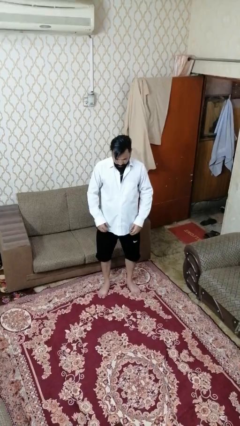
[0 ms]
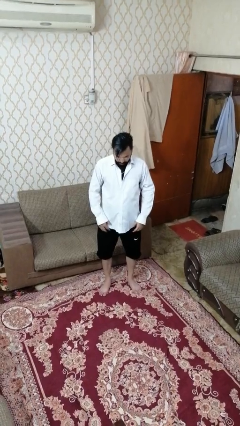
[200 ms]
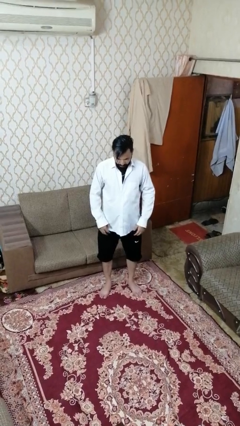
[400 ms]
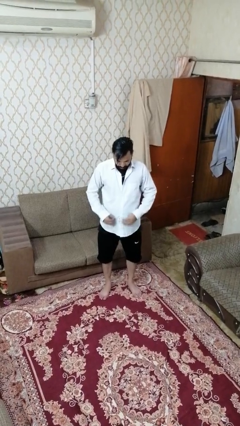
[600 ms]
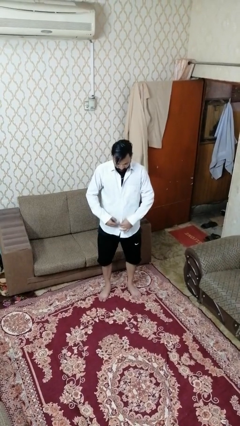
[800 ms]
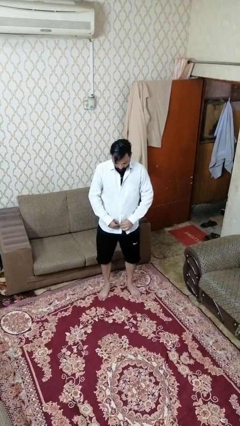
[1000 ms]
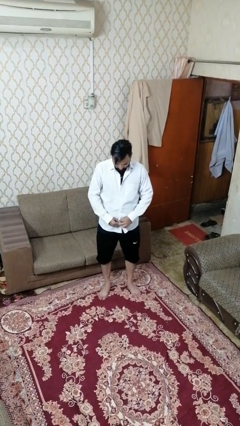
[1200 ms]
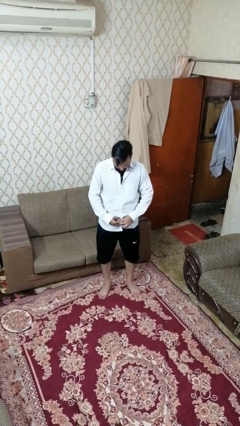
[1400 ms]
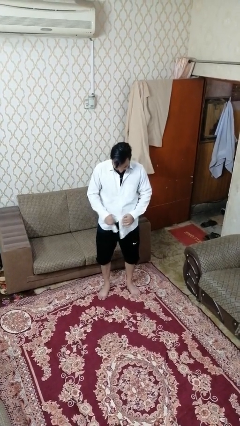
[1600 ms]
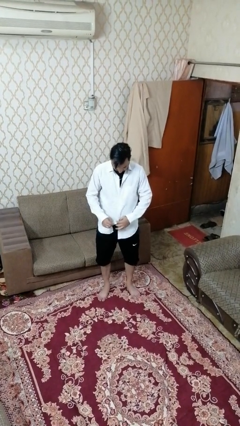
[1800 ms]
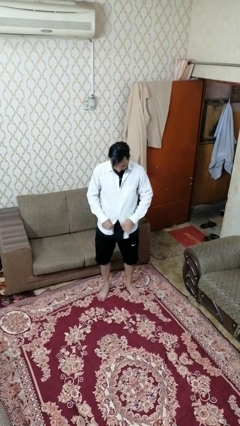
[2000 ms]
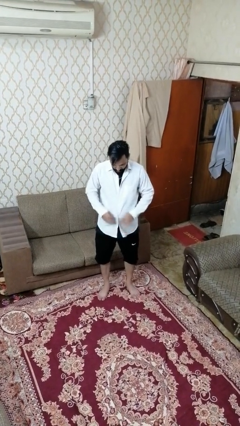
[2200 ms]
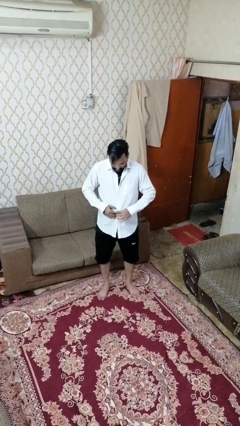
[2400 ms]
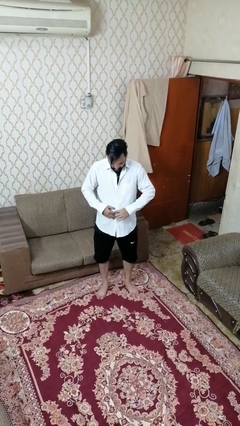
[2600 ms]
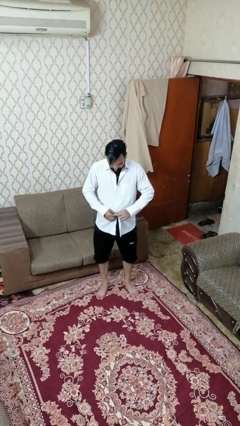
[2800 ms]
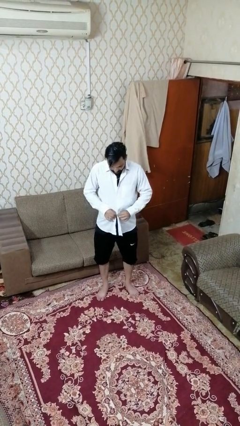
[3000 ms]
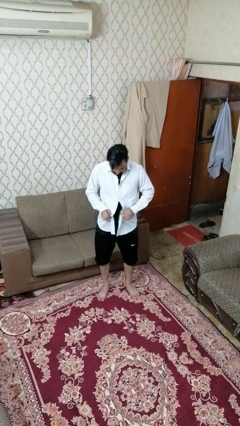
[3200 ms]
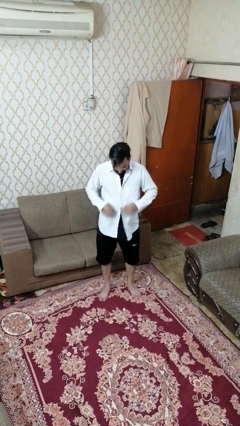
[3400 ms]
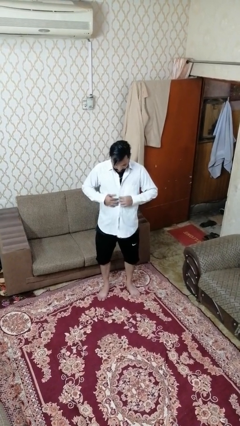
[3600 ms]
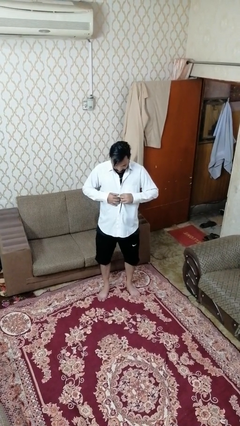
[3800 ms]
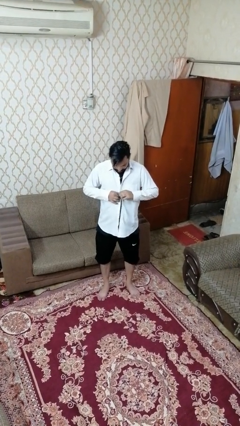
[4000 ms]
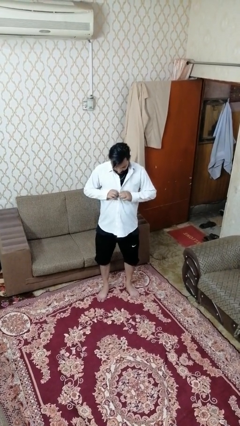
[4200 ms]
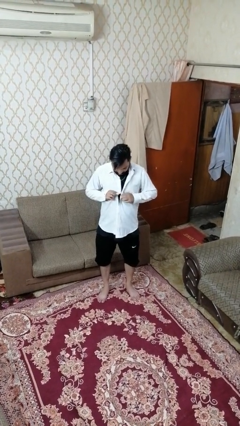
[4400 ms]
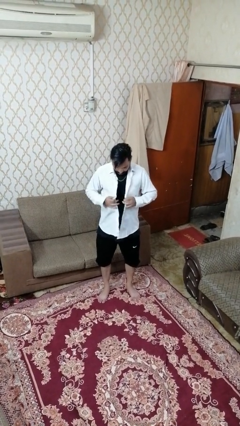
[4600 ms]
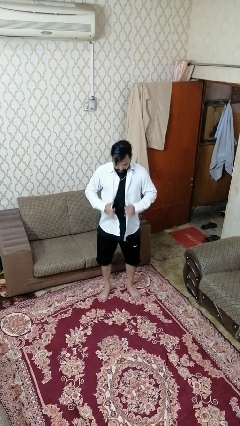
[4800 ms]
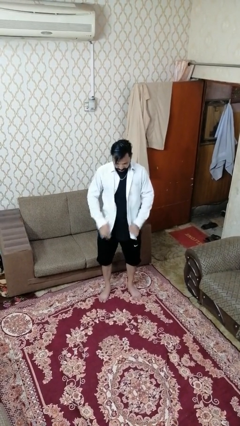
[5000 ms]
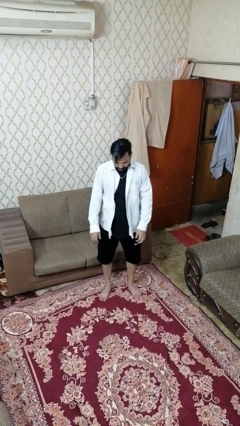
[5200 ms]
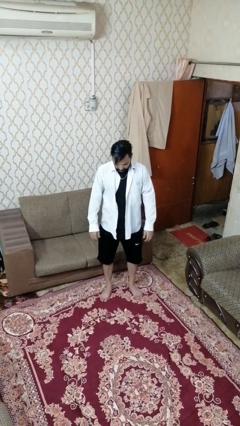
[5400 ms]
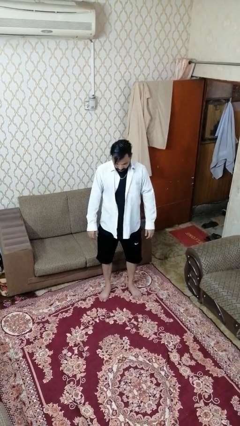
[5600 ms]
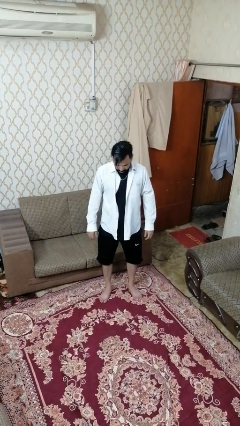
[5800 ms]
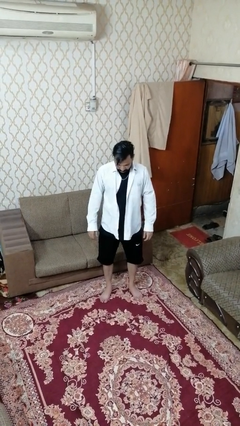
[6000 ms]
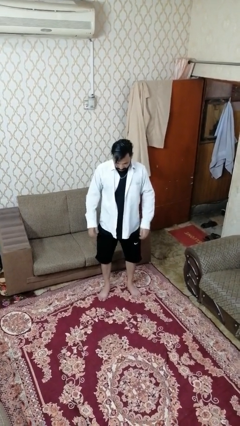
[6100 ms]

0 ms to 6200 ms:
person unbuttons shirt

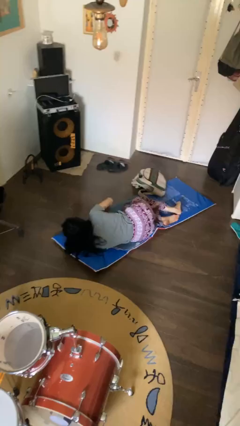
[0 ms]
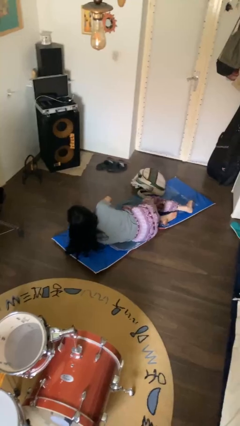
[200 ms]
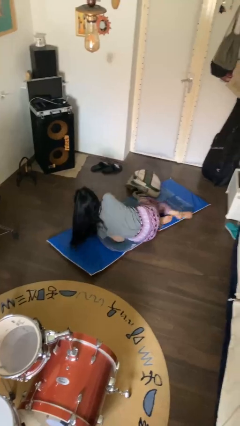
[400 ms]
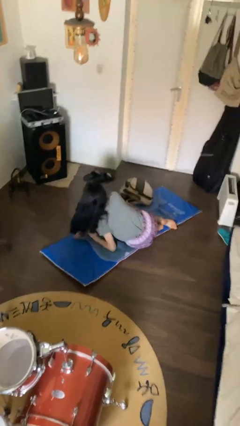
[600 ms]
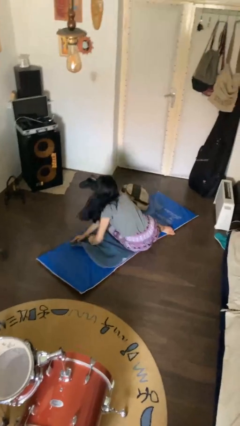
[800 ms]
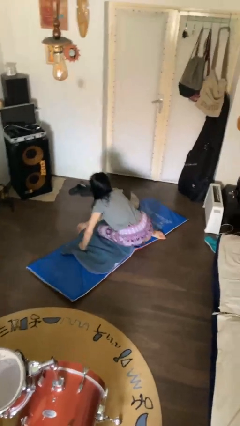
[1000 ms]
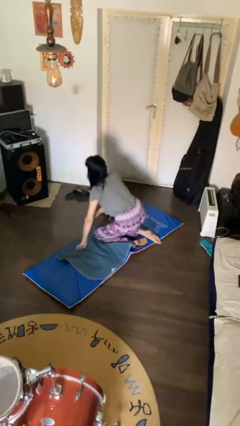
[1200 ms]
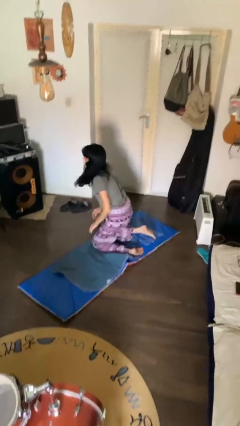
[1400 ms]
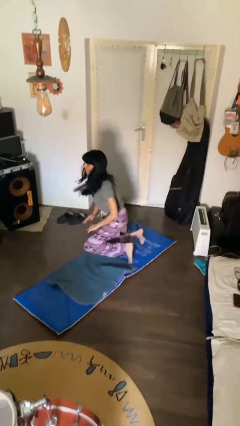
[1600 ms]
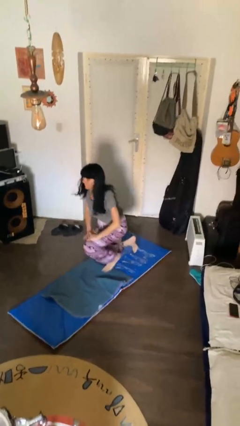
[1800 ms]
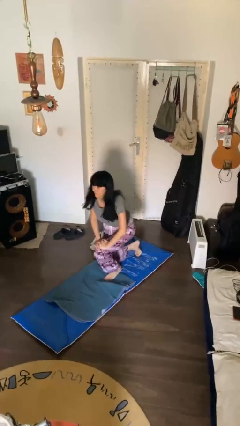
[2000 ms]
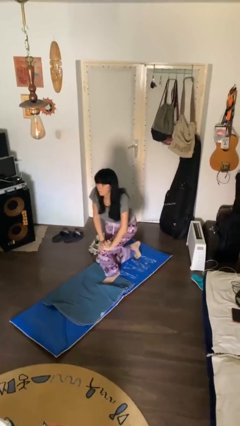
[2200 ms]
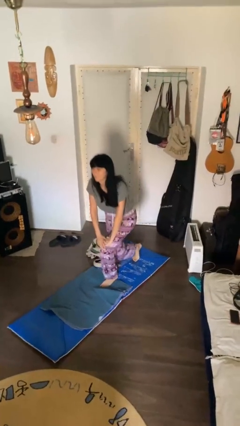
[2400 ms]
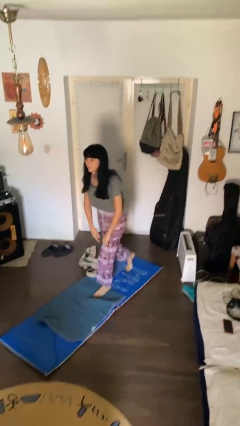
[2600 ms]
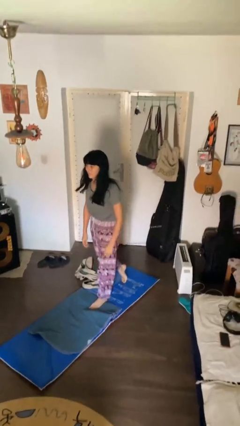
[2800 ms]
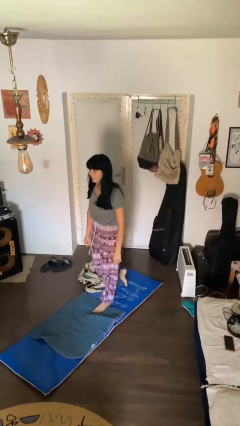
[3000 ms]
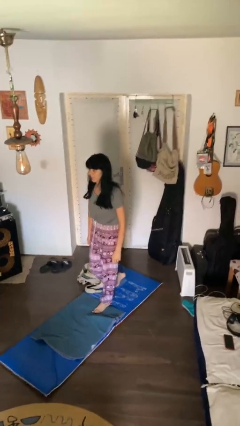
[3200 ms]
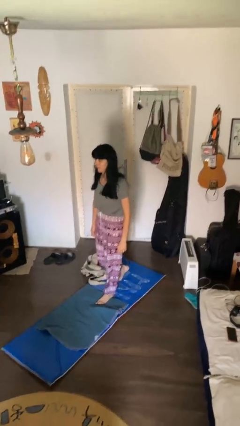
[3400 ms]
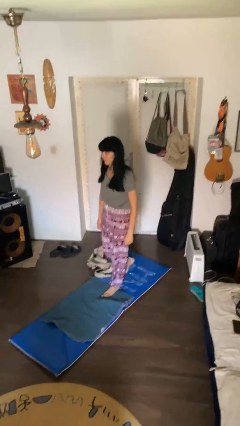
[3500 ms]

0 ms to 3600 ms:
person stands up from floor

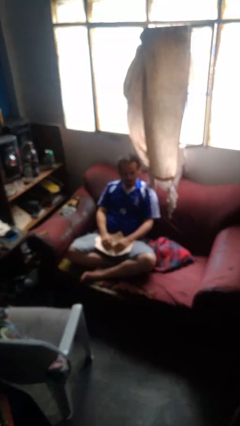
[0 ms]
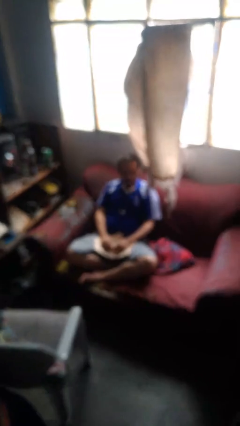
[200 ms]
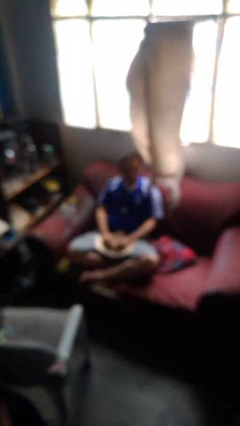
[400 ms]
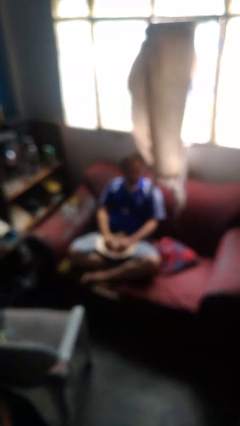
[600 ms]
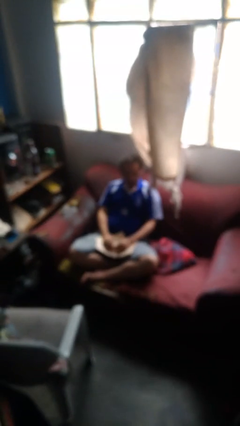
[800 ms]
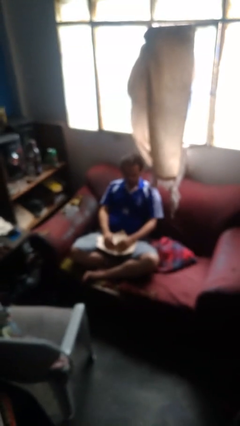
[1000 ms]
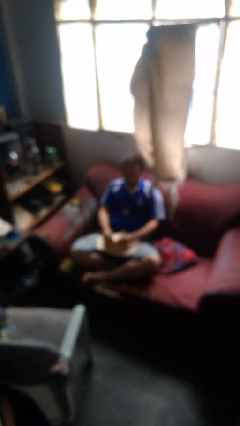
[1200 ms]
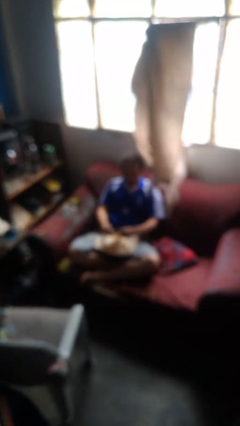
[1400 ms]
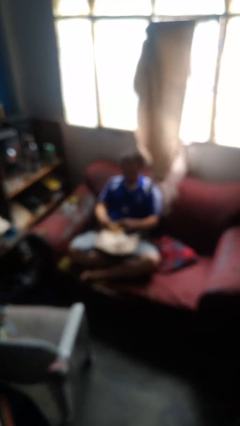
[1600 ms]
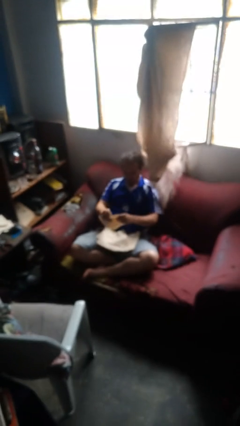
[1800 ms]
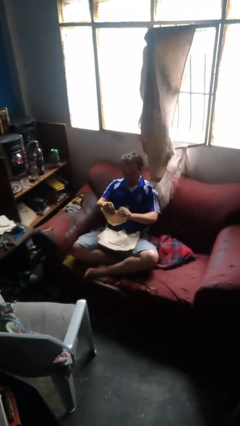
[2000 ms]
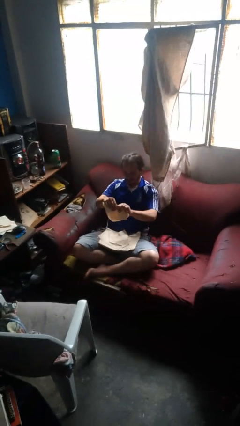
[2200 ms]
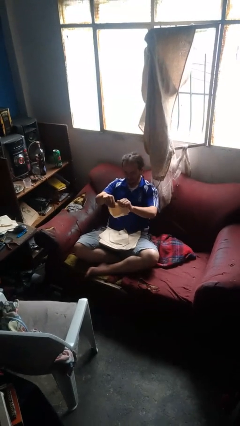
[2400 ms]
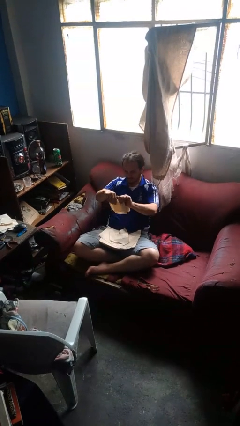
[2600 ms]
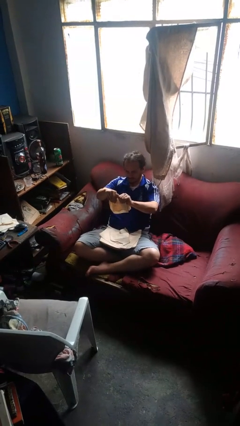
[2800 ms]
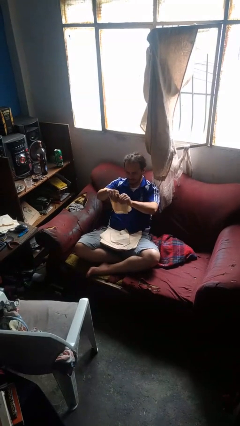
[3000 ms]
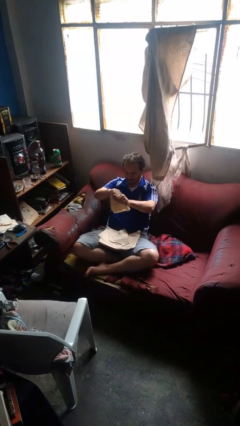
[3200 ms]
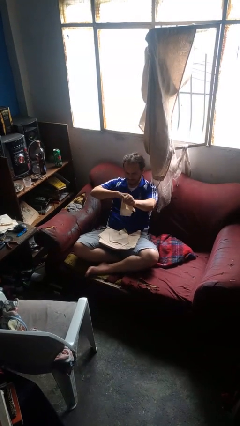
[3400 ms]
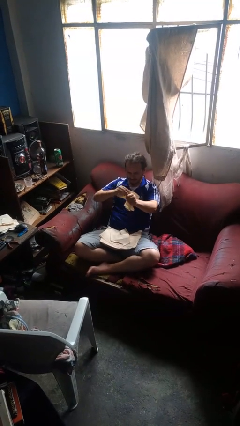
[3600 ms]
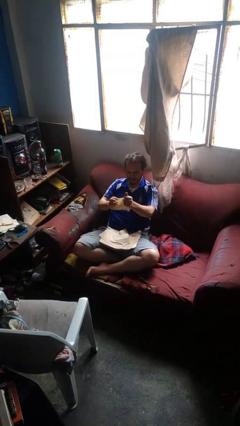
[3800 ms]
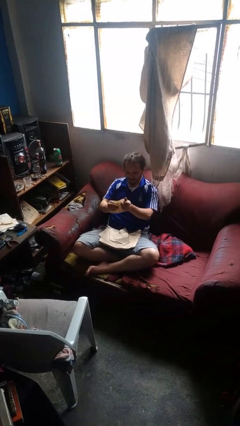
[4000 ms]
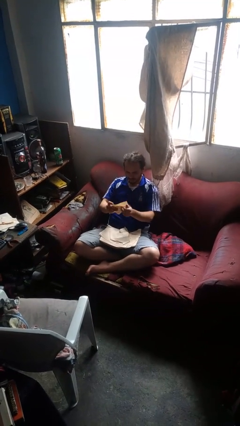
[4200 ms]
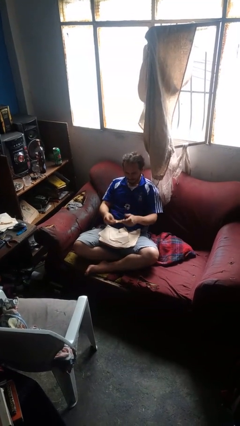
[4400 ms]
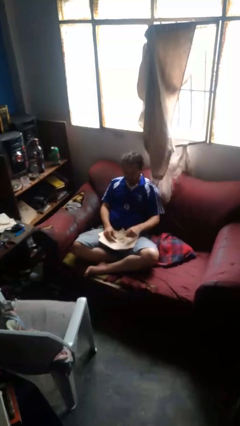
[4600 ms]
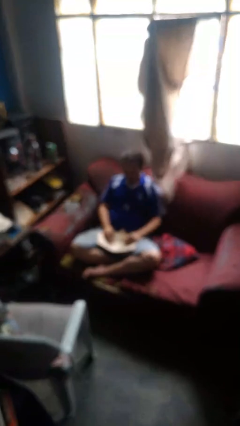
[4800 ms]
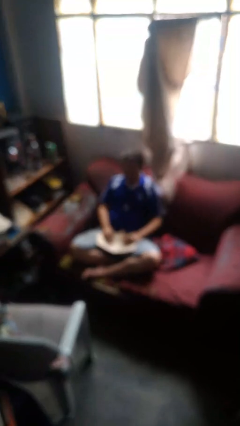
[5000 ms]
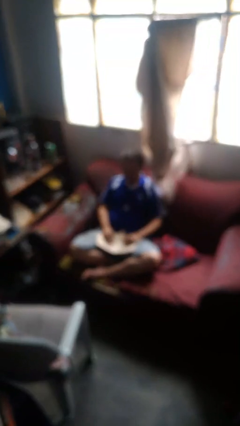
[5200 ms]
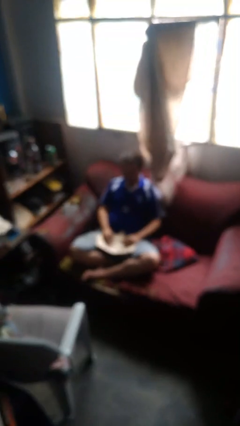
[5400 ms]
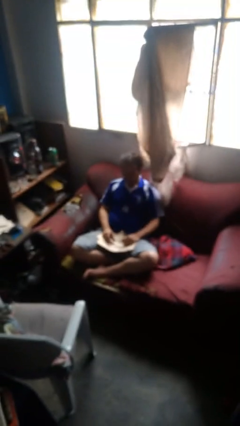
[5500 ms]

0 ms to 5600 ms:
person tears paper

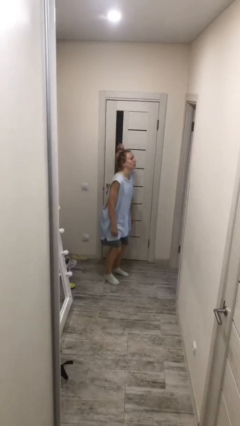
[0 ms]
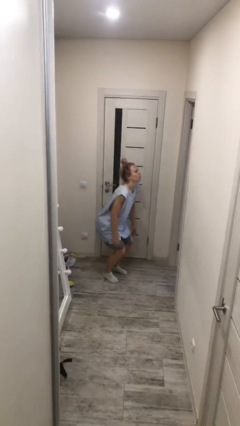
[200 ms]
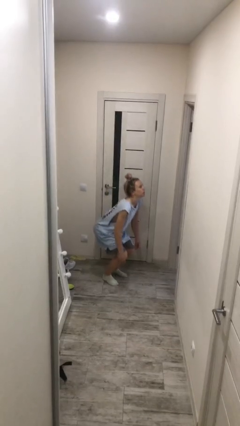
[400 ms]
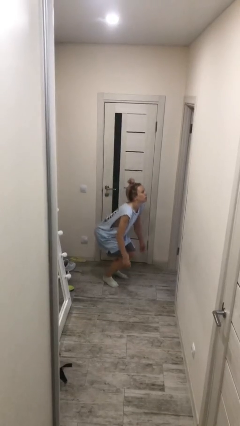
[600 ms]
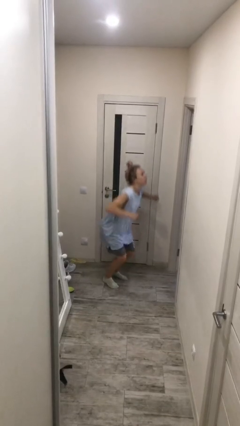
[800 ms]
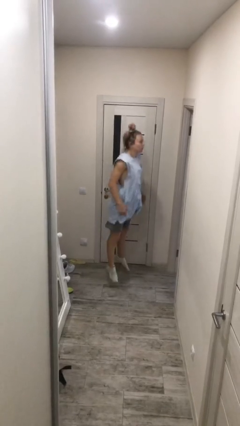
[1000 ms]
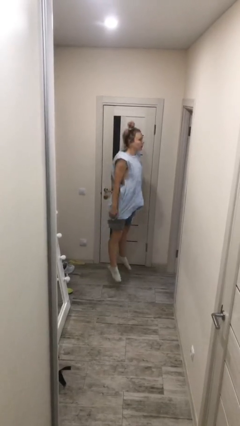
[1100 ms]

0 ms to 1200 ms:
person jumps

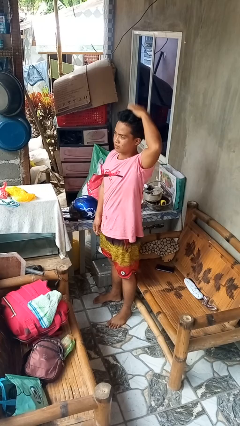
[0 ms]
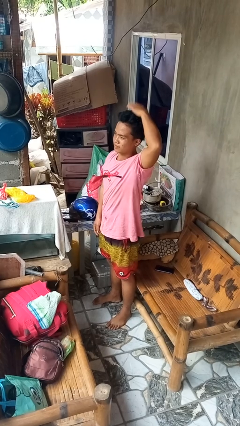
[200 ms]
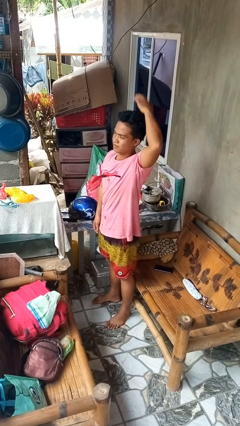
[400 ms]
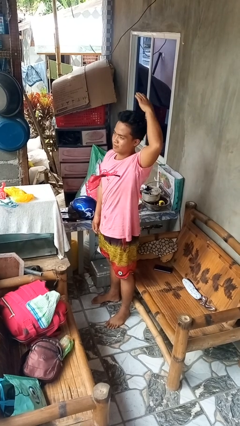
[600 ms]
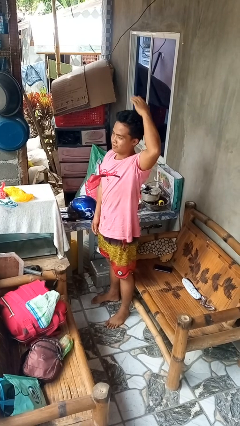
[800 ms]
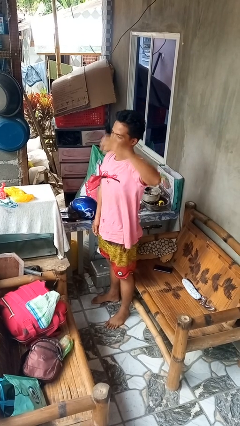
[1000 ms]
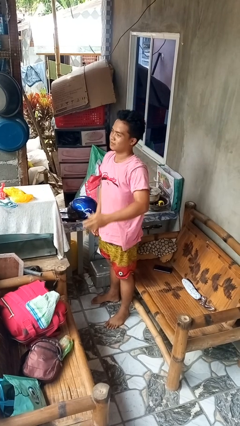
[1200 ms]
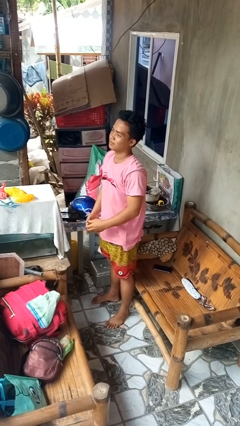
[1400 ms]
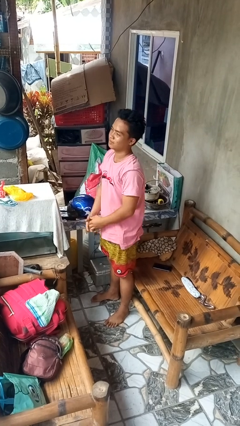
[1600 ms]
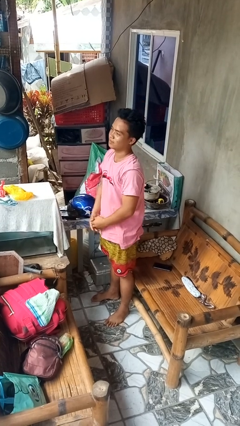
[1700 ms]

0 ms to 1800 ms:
person pats head
